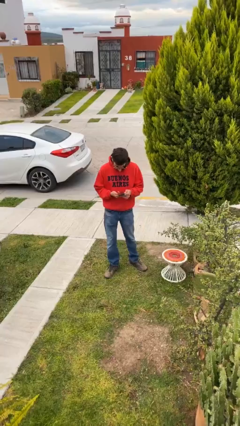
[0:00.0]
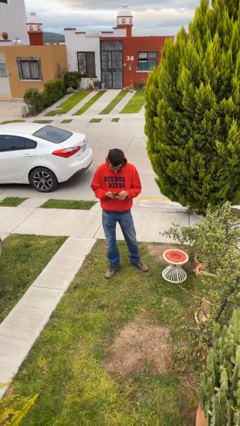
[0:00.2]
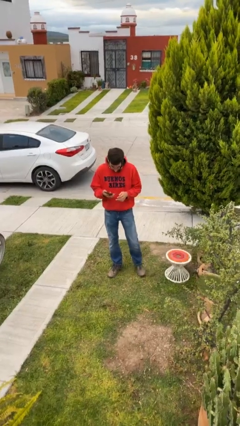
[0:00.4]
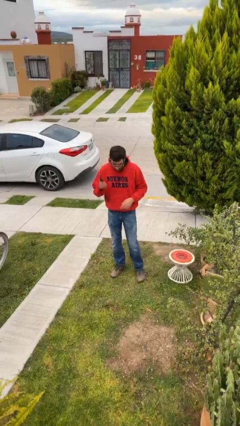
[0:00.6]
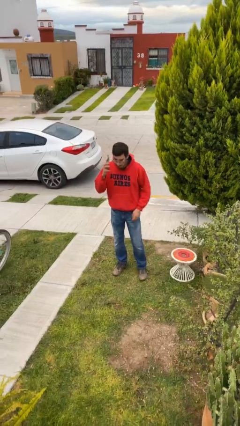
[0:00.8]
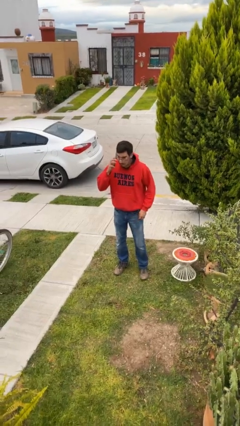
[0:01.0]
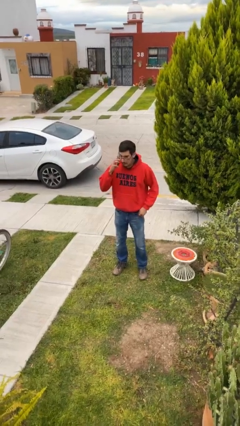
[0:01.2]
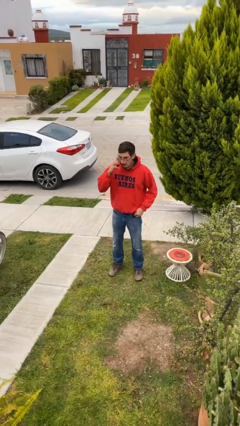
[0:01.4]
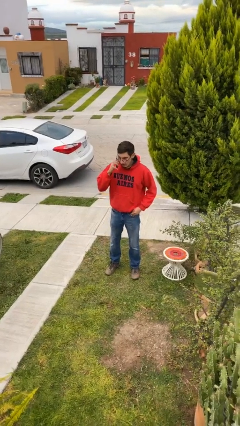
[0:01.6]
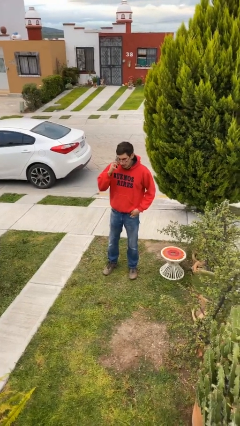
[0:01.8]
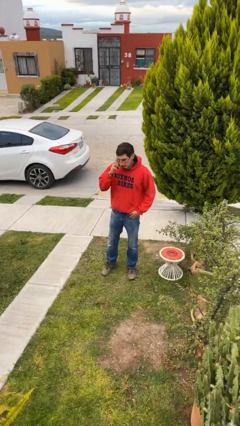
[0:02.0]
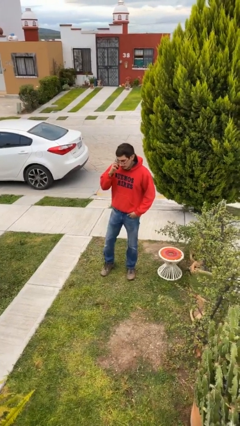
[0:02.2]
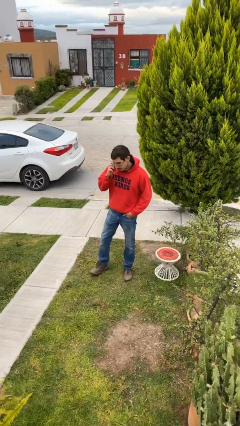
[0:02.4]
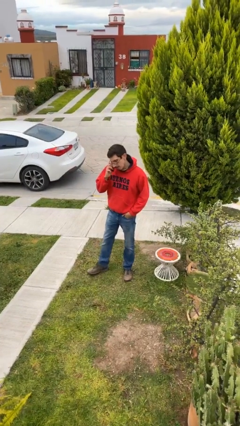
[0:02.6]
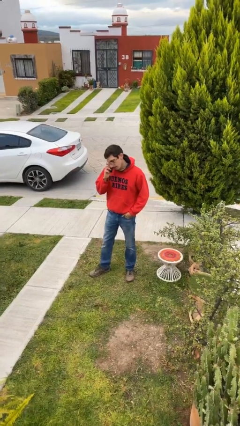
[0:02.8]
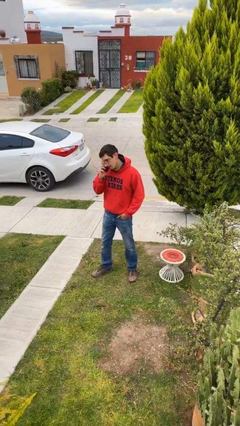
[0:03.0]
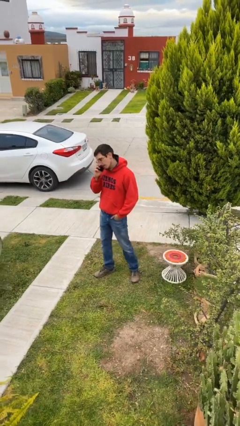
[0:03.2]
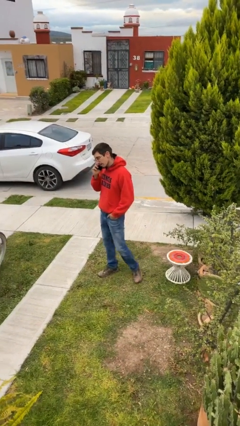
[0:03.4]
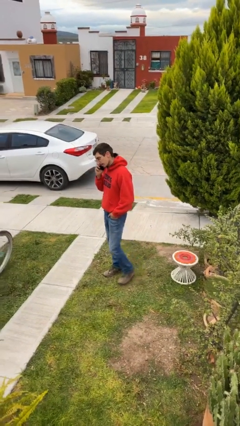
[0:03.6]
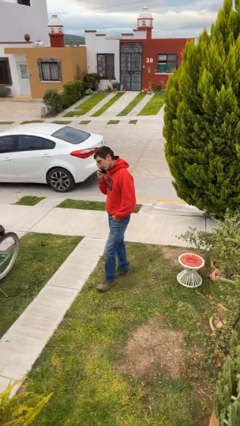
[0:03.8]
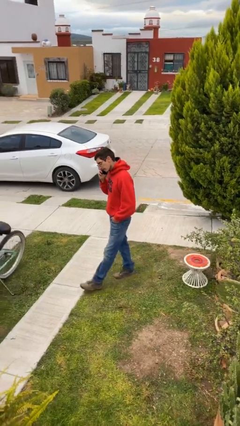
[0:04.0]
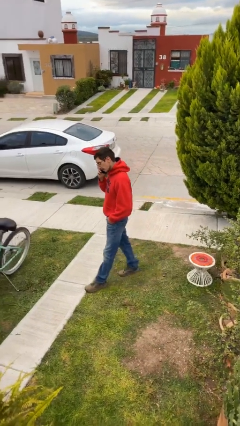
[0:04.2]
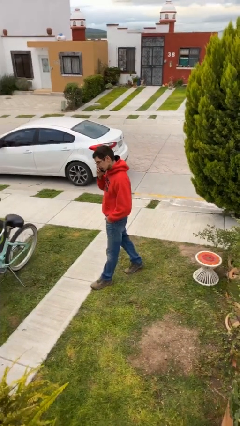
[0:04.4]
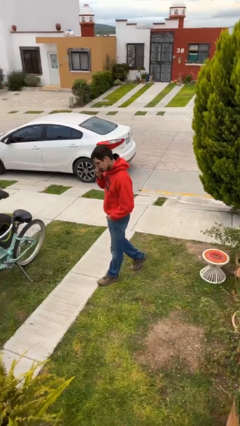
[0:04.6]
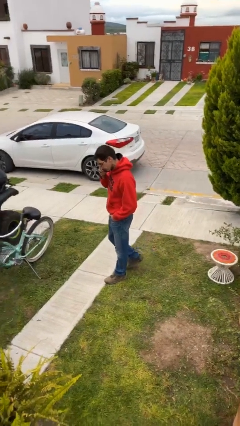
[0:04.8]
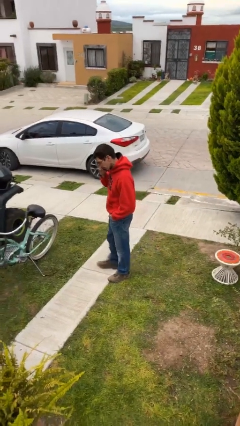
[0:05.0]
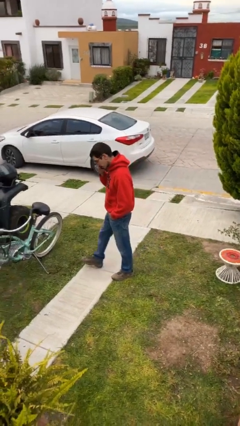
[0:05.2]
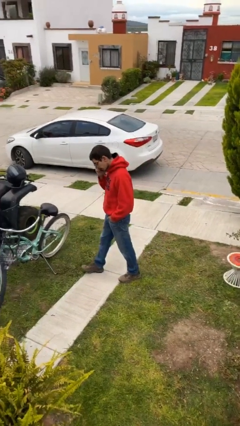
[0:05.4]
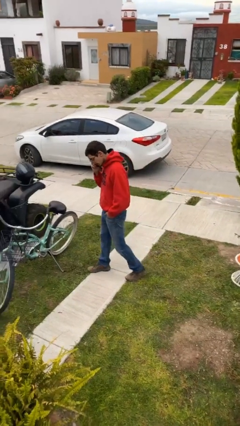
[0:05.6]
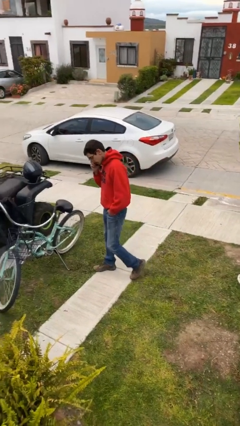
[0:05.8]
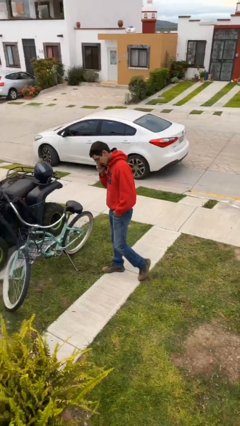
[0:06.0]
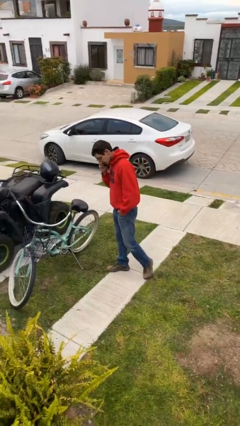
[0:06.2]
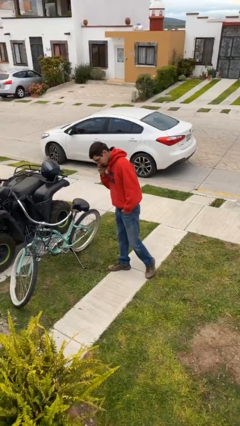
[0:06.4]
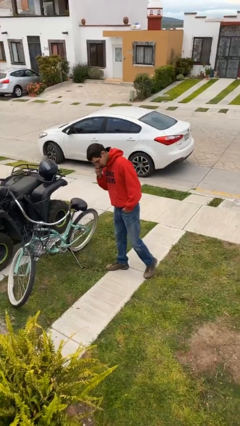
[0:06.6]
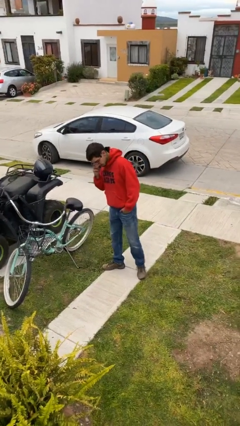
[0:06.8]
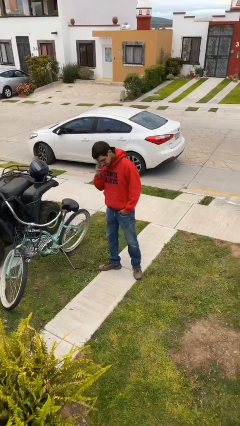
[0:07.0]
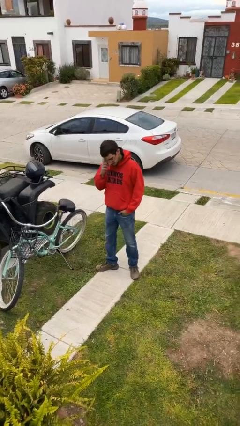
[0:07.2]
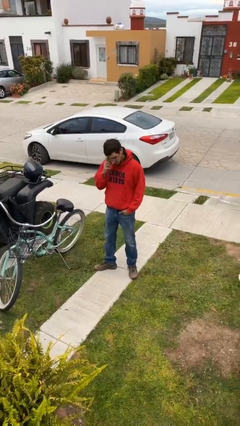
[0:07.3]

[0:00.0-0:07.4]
person talks on phone

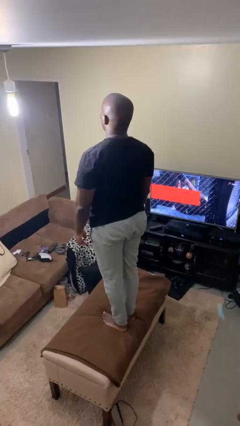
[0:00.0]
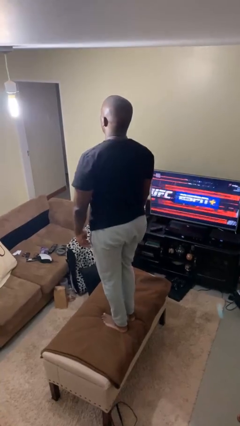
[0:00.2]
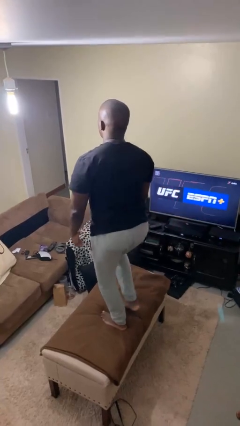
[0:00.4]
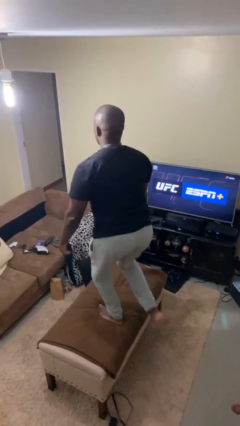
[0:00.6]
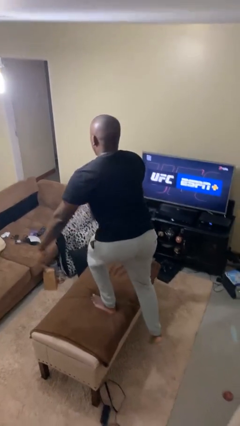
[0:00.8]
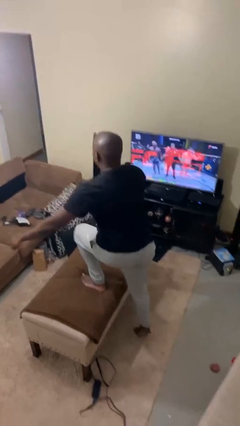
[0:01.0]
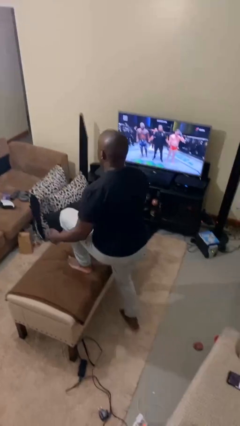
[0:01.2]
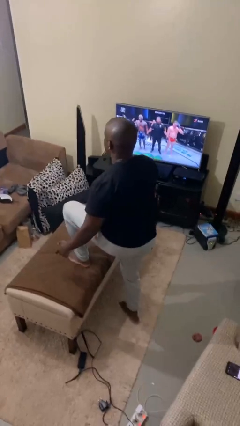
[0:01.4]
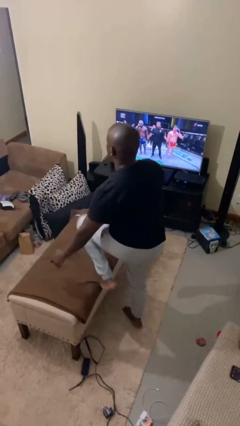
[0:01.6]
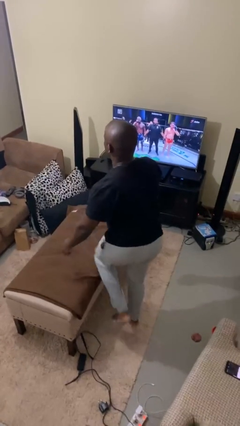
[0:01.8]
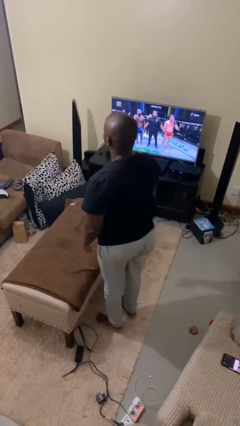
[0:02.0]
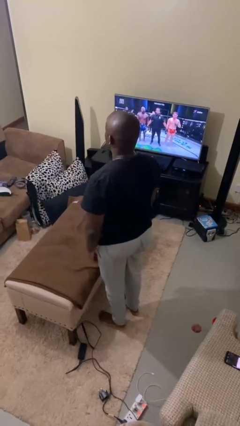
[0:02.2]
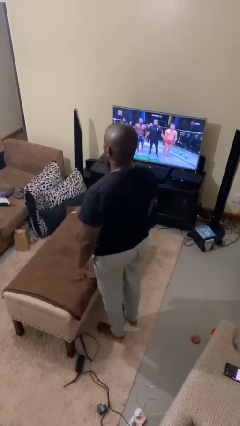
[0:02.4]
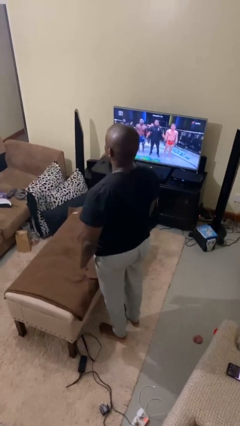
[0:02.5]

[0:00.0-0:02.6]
person climbs off table

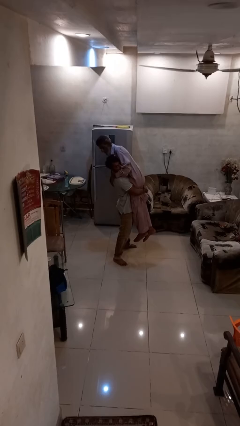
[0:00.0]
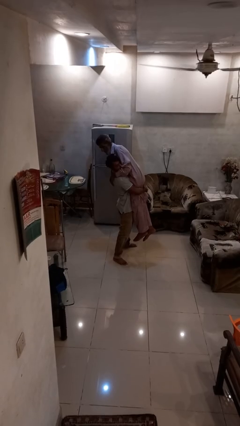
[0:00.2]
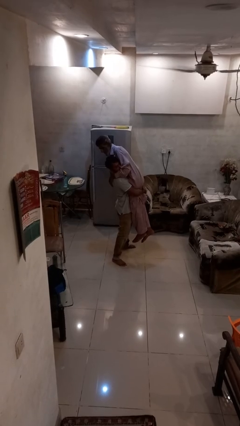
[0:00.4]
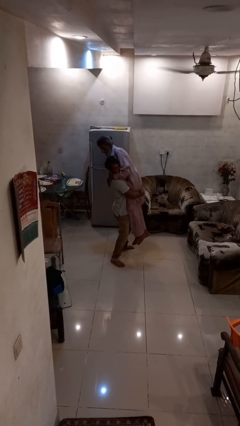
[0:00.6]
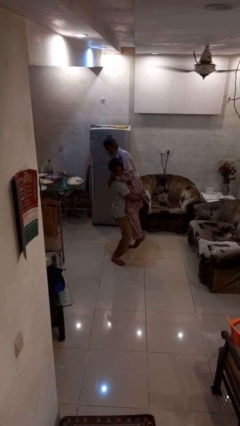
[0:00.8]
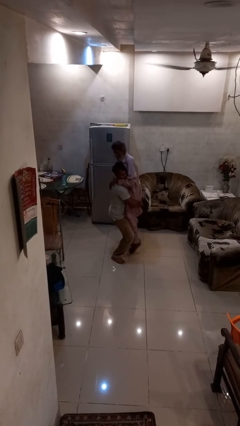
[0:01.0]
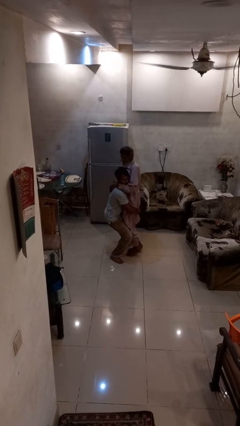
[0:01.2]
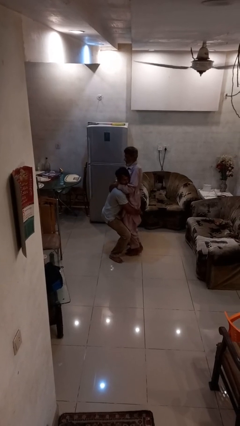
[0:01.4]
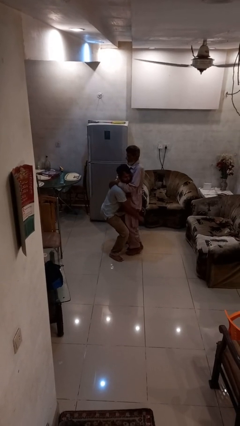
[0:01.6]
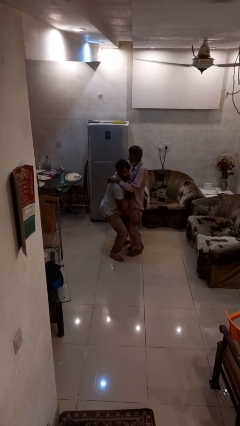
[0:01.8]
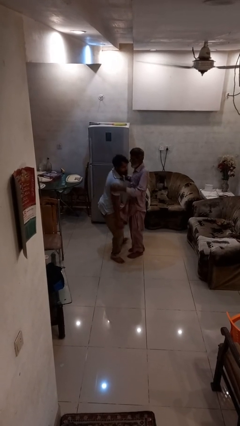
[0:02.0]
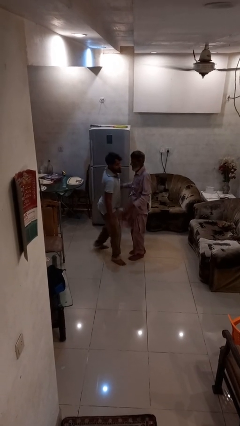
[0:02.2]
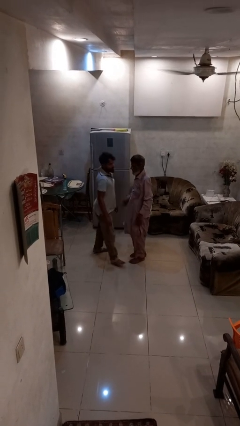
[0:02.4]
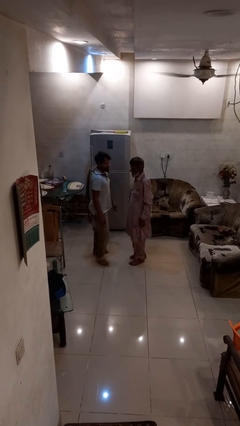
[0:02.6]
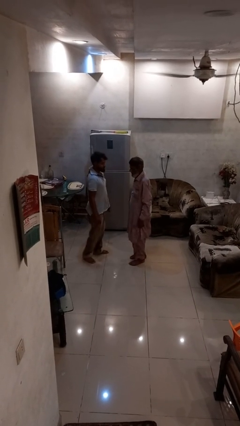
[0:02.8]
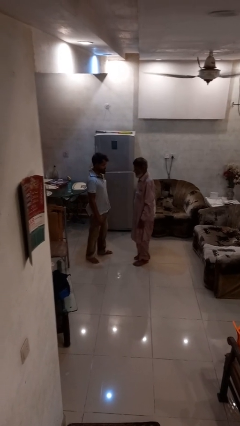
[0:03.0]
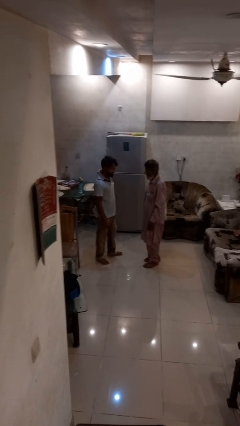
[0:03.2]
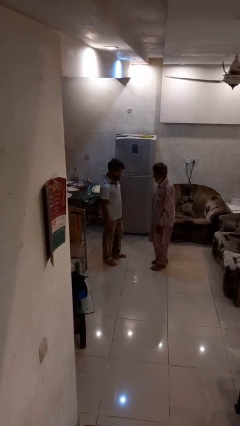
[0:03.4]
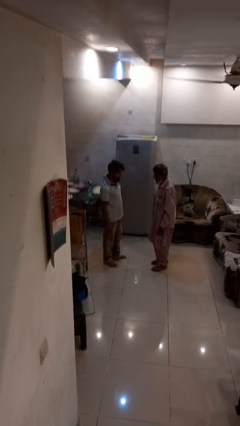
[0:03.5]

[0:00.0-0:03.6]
person puts down person

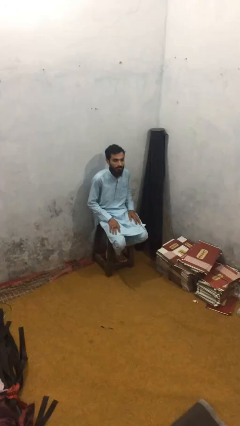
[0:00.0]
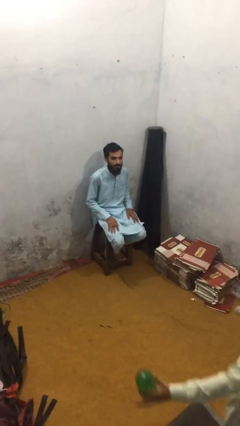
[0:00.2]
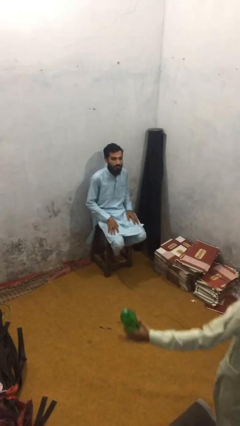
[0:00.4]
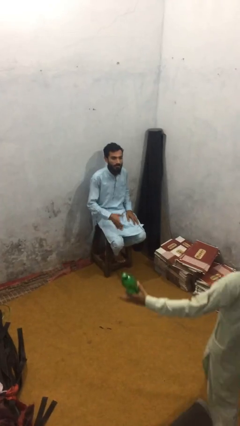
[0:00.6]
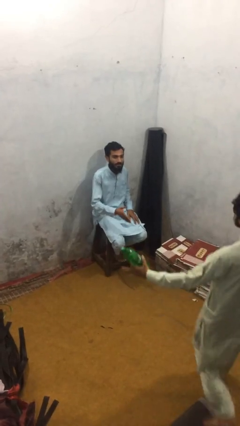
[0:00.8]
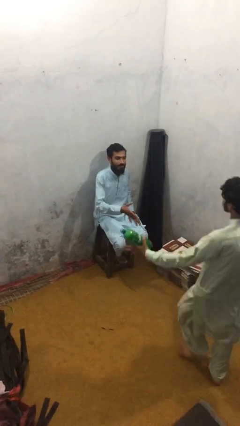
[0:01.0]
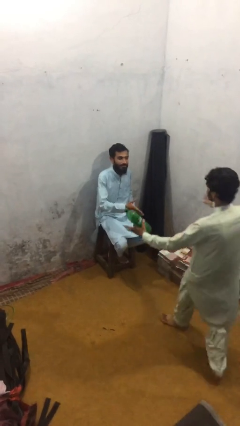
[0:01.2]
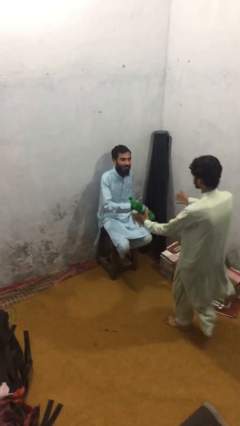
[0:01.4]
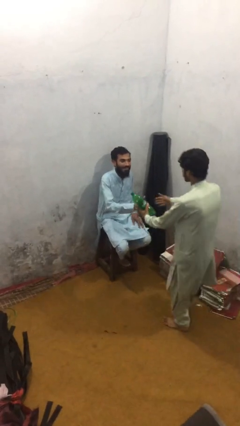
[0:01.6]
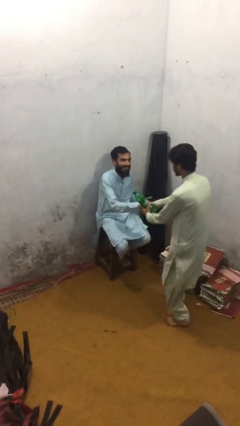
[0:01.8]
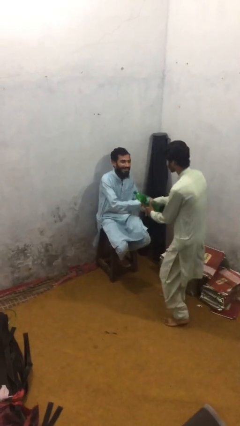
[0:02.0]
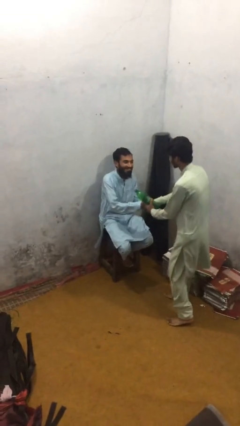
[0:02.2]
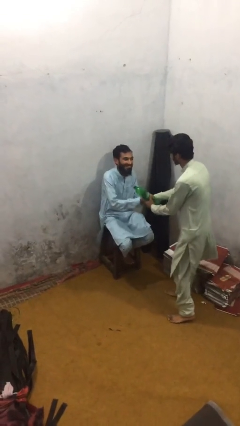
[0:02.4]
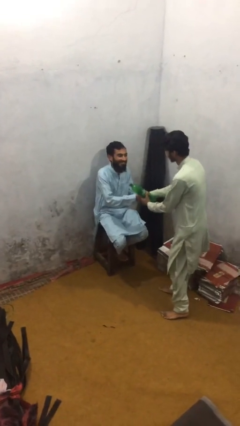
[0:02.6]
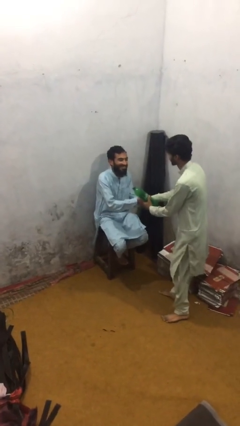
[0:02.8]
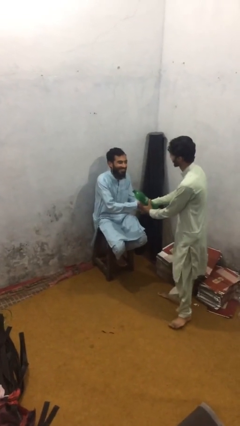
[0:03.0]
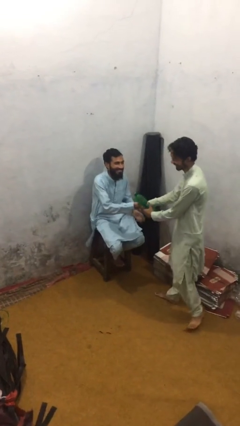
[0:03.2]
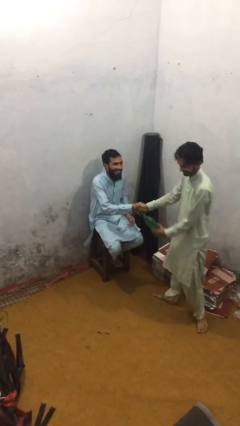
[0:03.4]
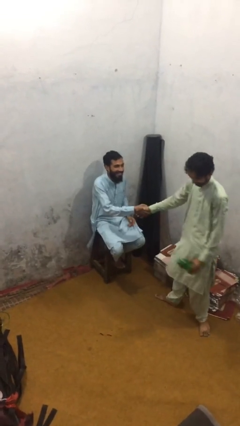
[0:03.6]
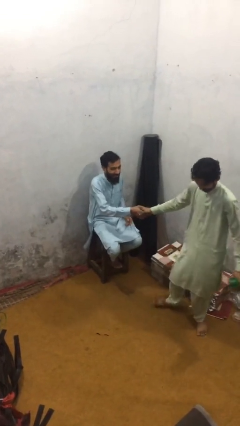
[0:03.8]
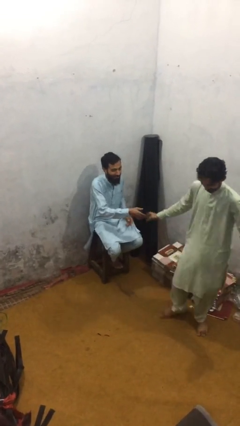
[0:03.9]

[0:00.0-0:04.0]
person shakes hand

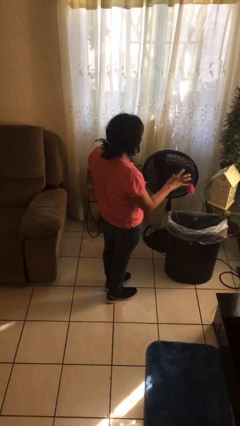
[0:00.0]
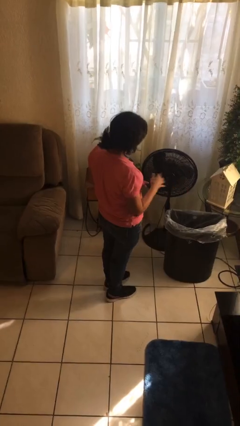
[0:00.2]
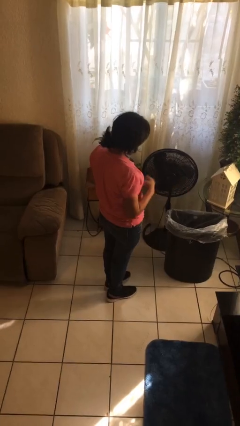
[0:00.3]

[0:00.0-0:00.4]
person discards trash
